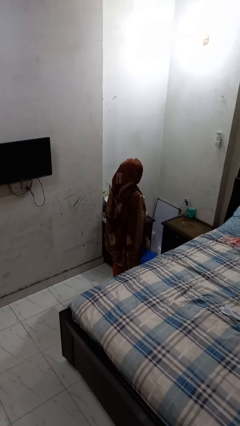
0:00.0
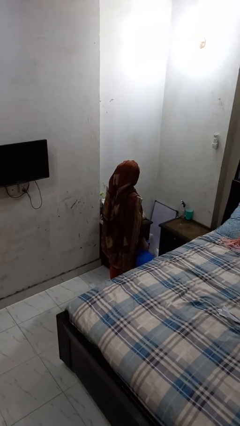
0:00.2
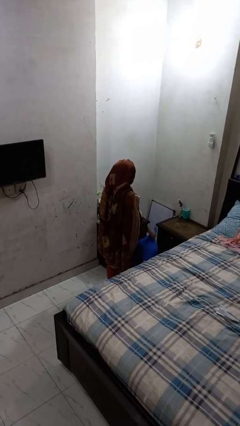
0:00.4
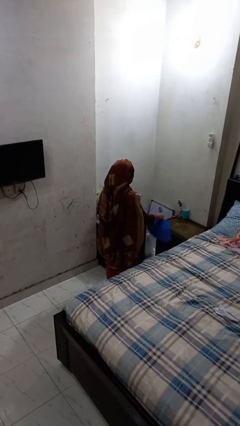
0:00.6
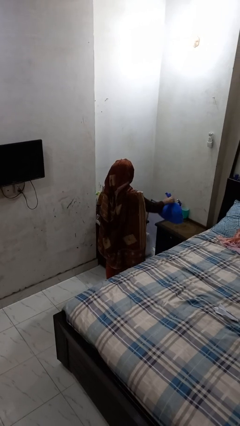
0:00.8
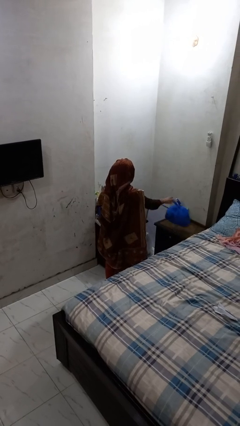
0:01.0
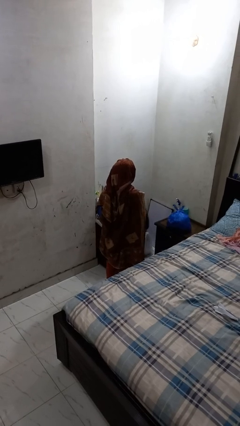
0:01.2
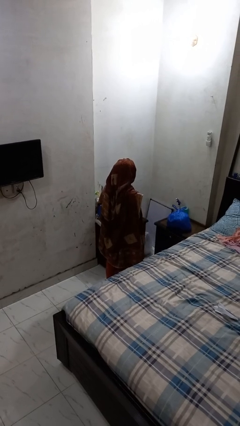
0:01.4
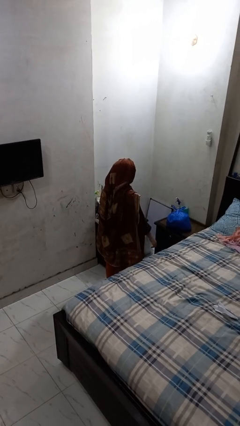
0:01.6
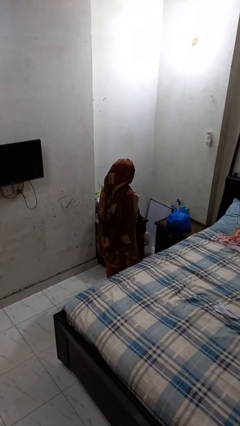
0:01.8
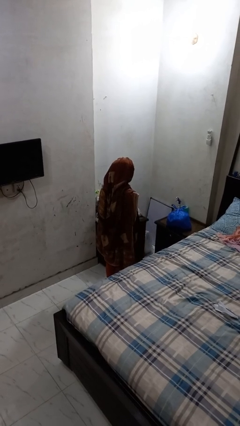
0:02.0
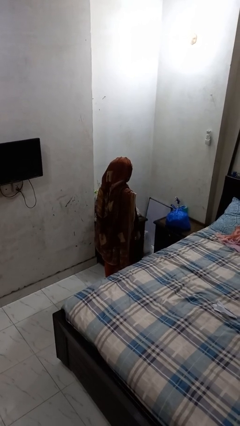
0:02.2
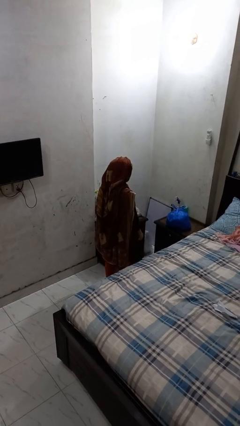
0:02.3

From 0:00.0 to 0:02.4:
person throws object on table

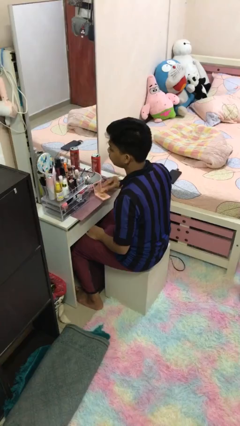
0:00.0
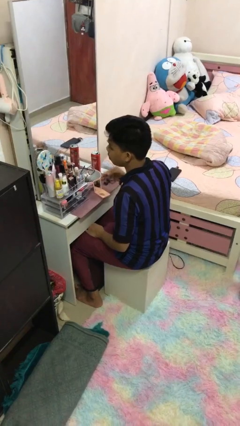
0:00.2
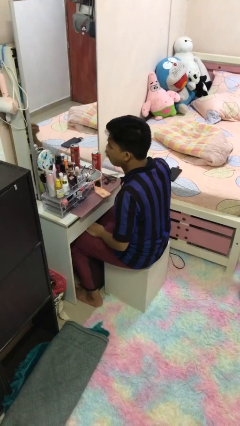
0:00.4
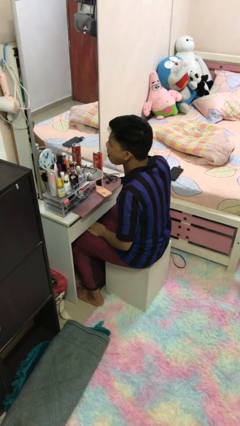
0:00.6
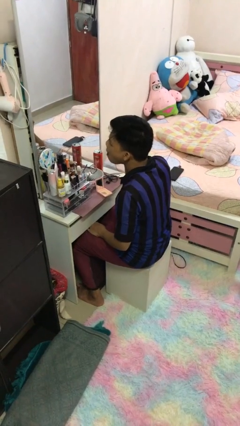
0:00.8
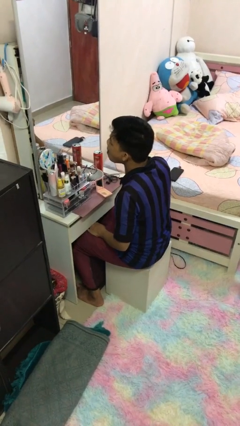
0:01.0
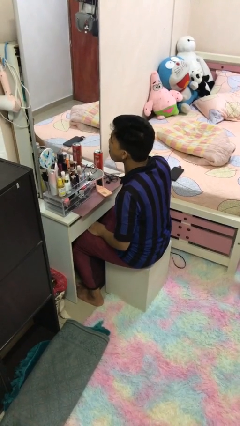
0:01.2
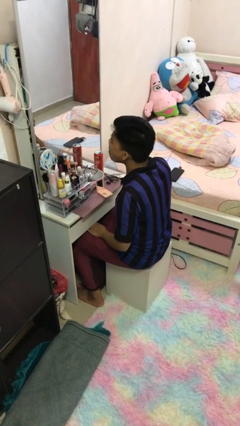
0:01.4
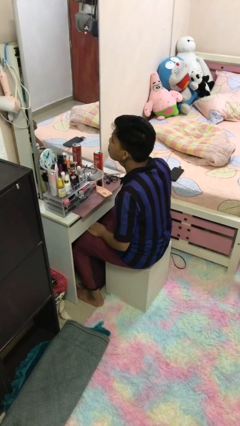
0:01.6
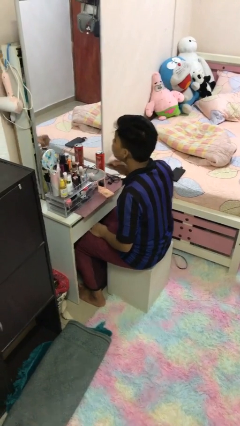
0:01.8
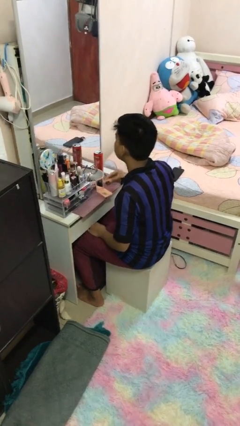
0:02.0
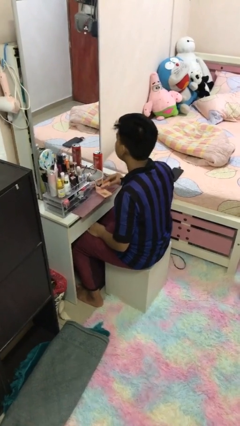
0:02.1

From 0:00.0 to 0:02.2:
person applies foundation makeup

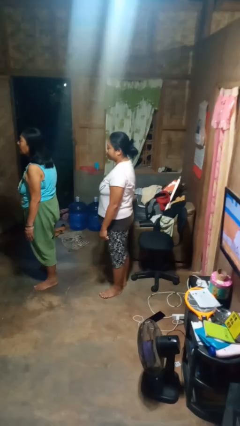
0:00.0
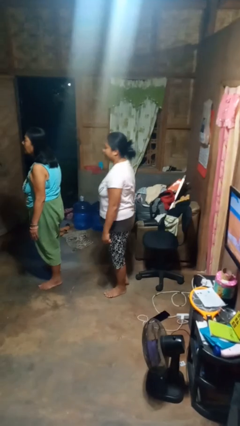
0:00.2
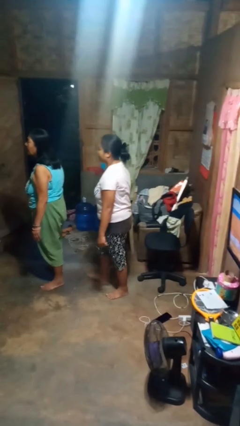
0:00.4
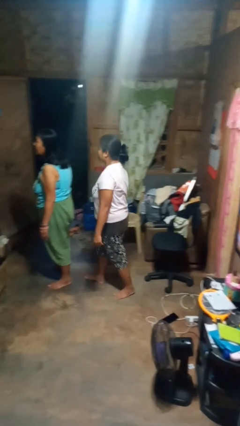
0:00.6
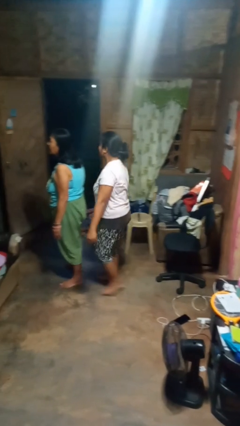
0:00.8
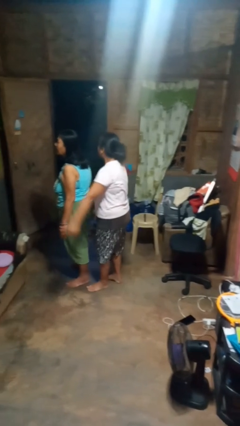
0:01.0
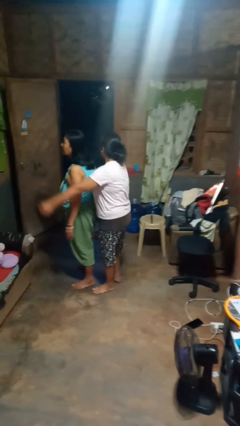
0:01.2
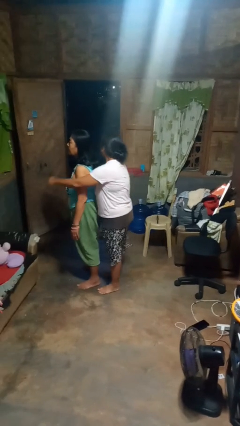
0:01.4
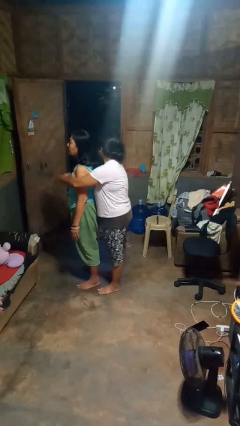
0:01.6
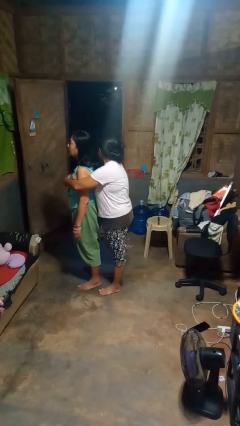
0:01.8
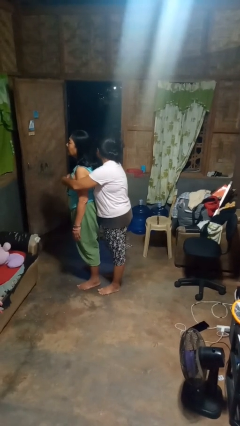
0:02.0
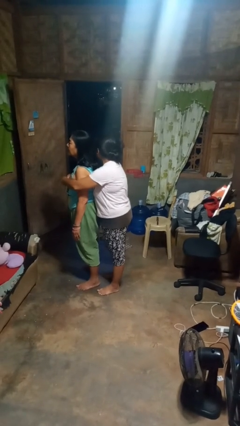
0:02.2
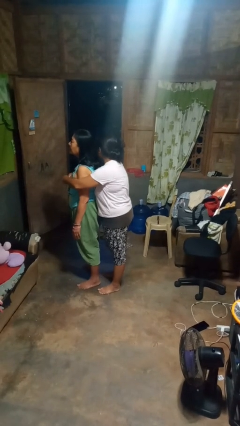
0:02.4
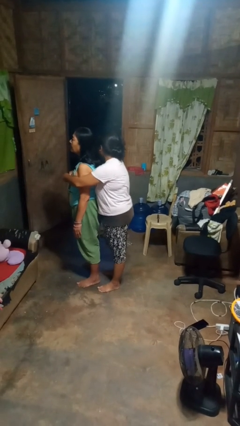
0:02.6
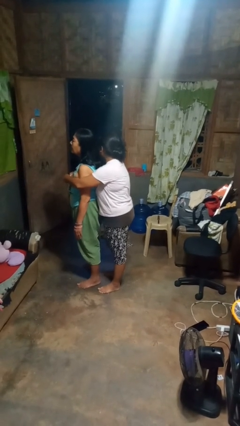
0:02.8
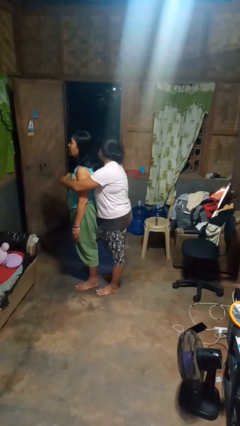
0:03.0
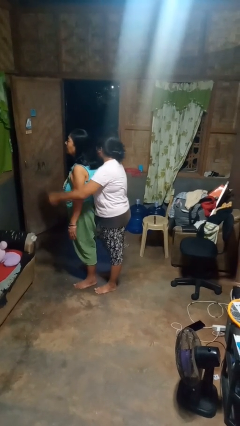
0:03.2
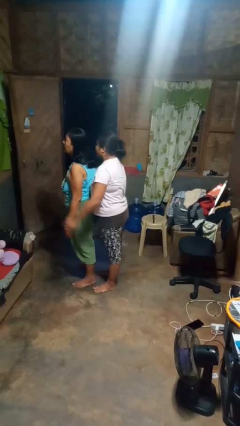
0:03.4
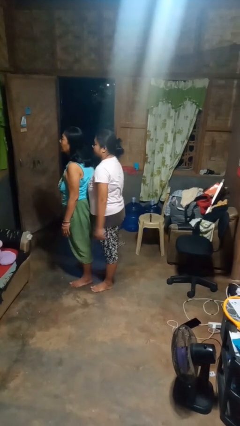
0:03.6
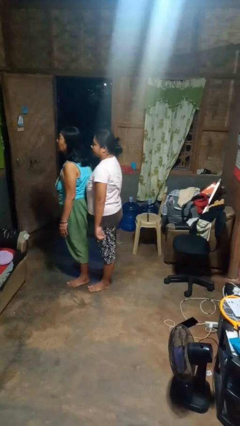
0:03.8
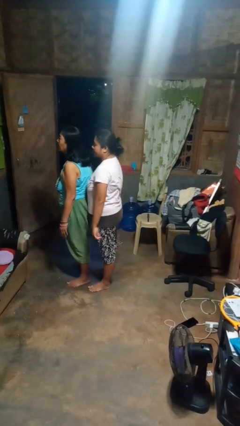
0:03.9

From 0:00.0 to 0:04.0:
person hugs person from behind

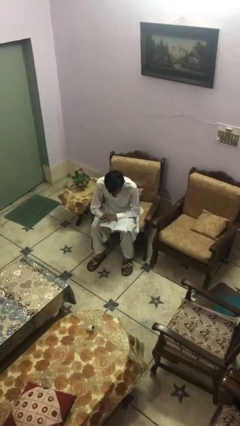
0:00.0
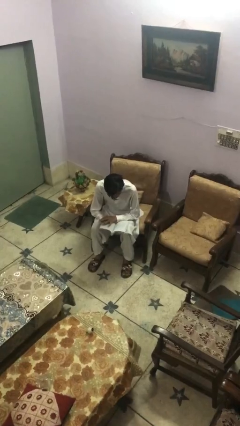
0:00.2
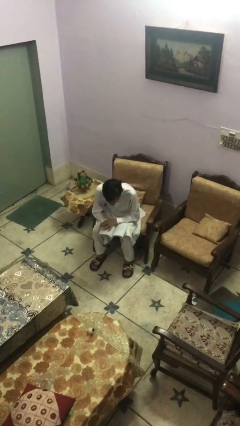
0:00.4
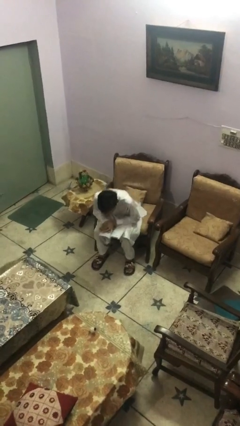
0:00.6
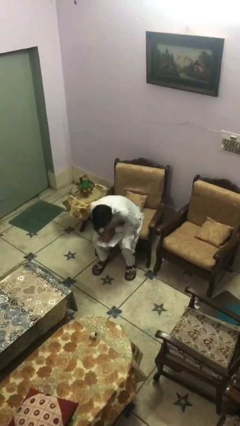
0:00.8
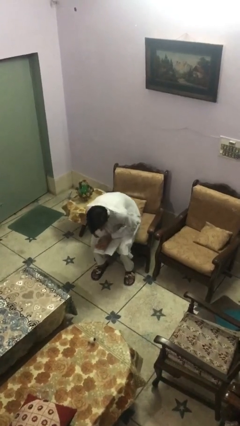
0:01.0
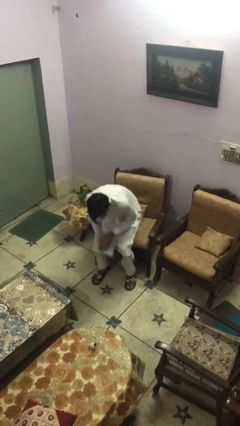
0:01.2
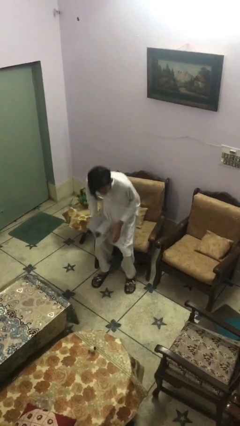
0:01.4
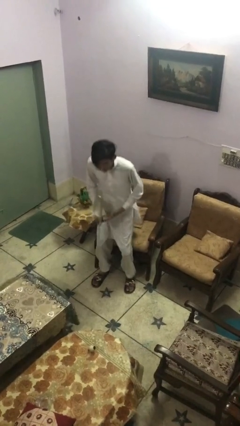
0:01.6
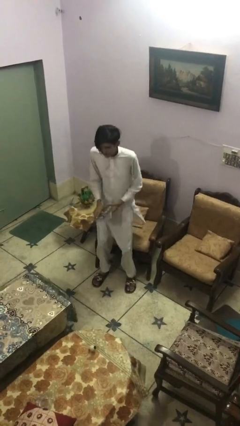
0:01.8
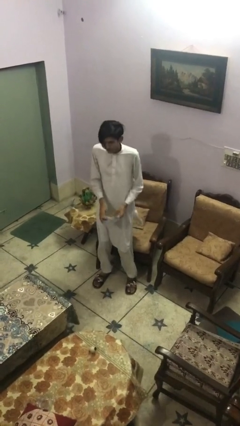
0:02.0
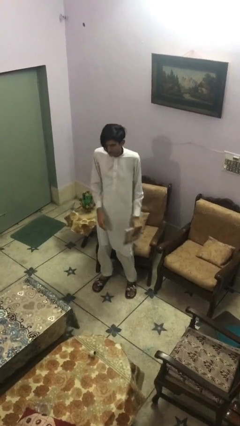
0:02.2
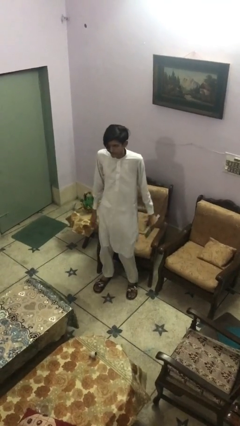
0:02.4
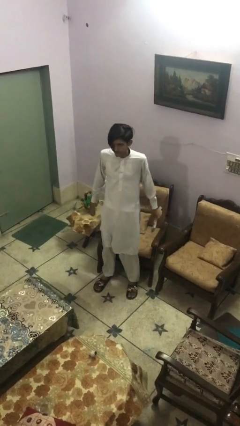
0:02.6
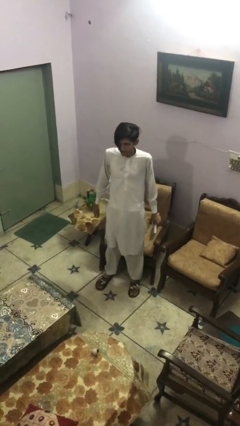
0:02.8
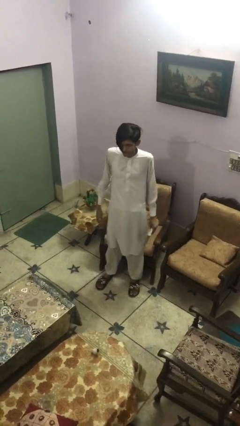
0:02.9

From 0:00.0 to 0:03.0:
person stands up

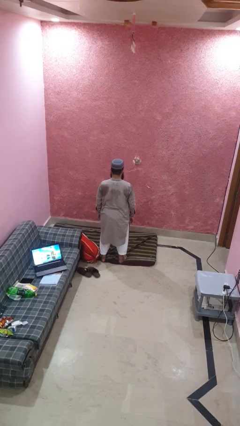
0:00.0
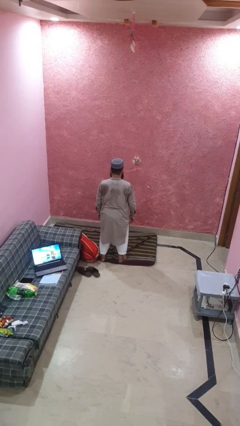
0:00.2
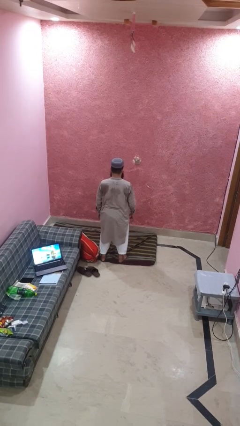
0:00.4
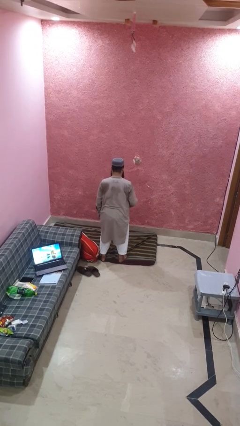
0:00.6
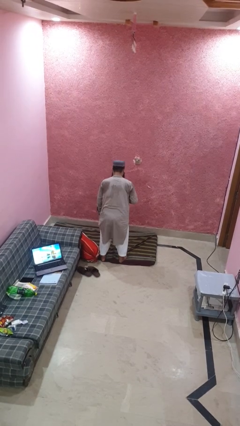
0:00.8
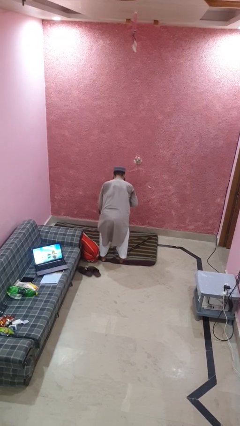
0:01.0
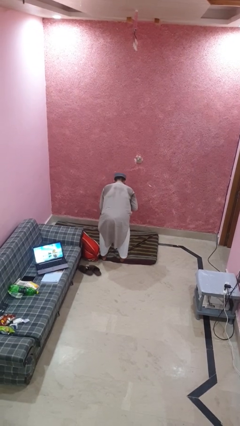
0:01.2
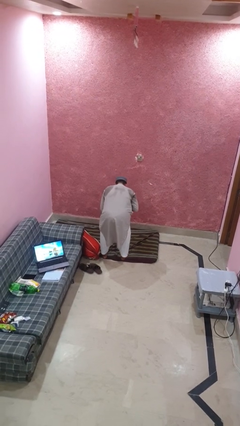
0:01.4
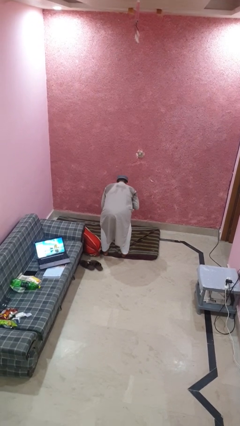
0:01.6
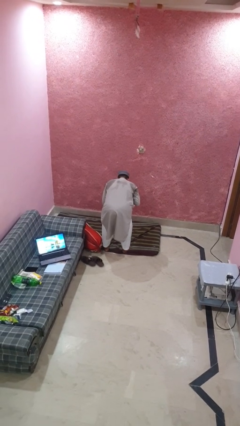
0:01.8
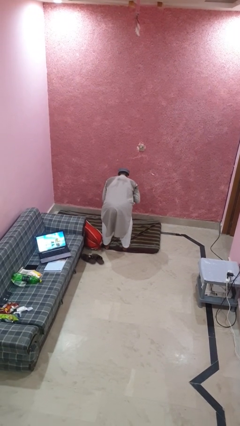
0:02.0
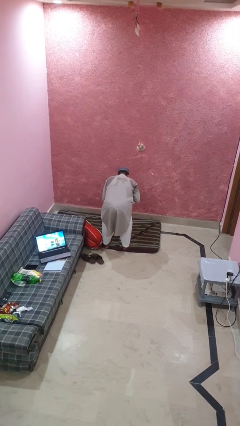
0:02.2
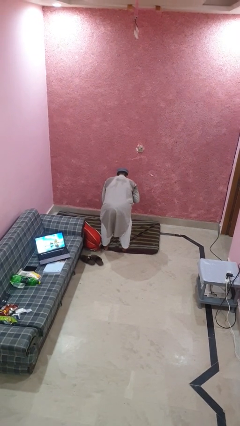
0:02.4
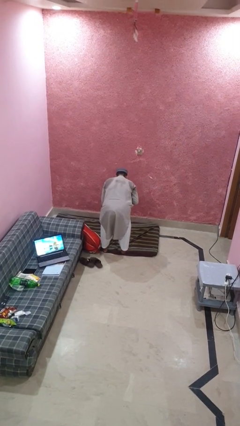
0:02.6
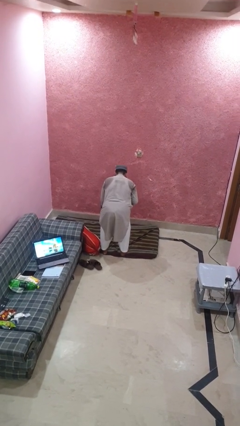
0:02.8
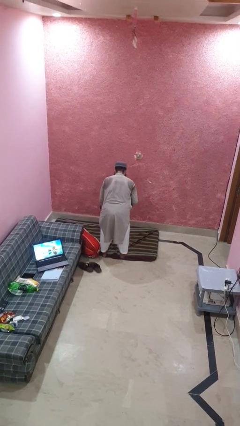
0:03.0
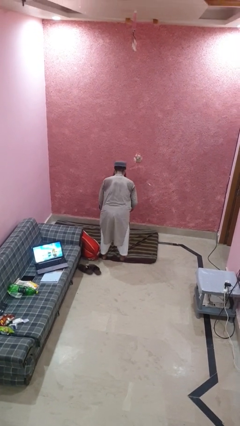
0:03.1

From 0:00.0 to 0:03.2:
person bows

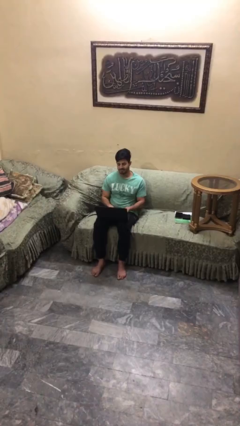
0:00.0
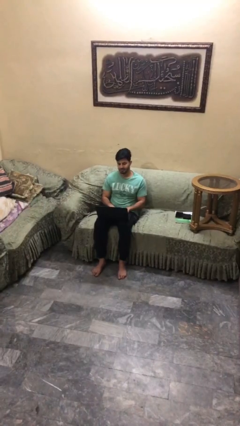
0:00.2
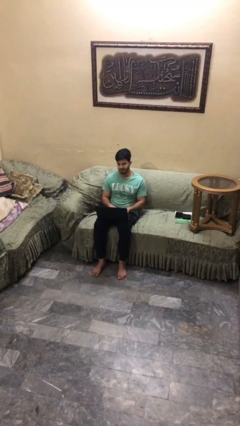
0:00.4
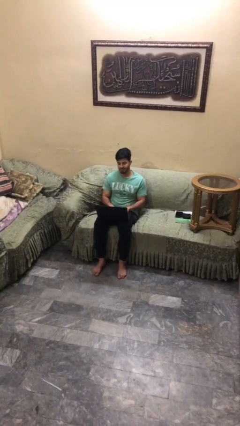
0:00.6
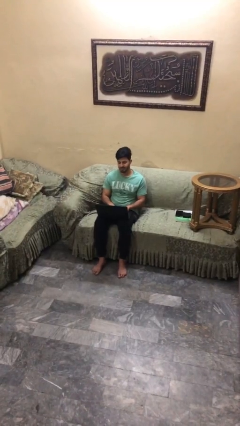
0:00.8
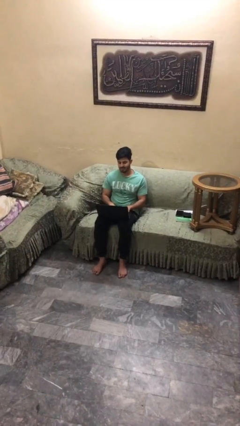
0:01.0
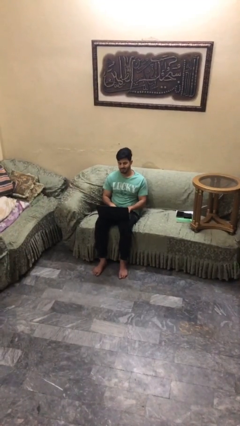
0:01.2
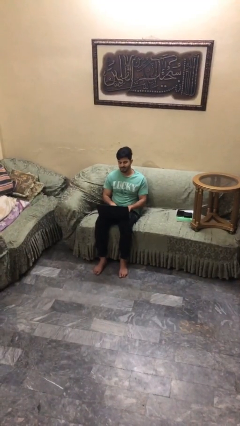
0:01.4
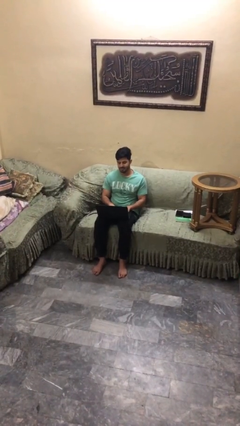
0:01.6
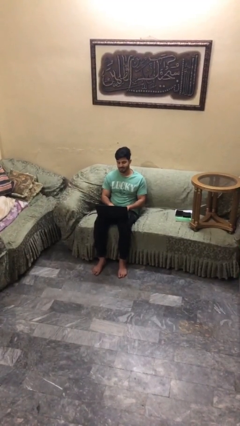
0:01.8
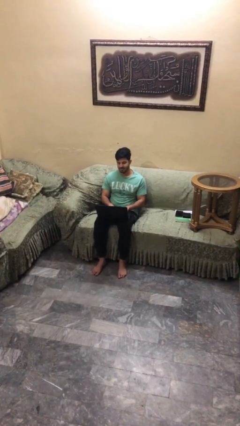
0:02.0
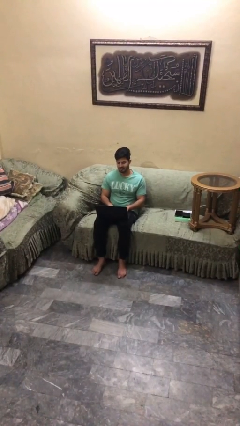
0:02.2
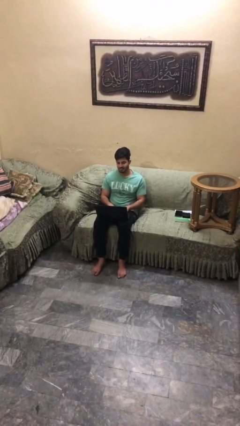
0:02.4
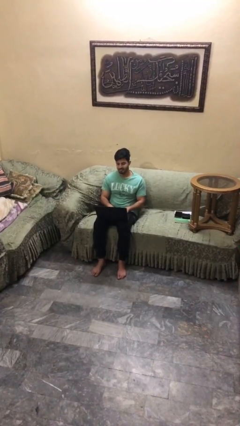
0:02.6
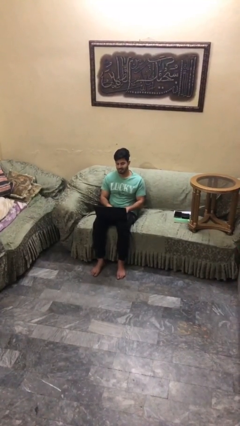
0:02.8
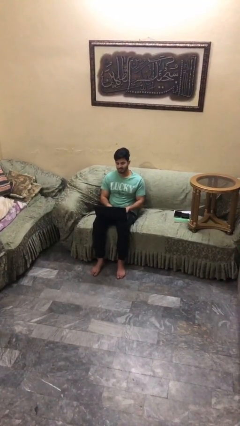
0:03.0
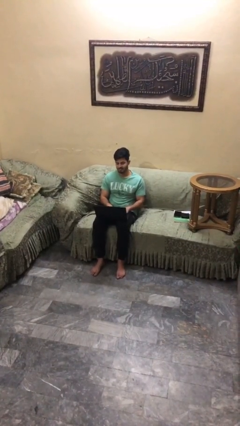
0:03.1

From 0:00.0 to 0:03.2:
person interacts with laptop
